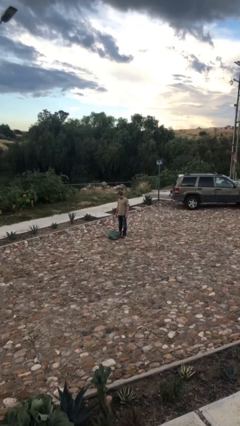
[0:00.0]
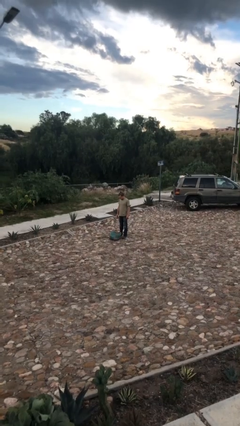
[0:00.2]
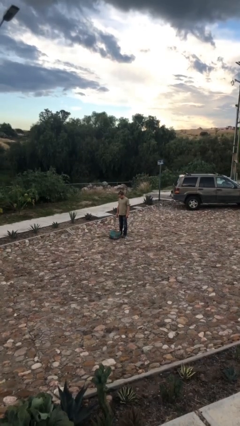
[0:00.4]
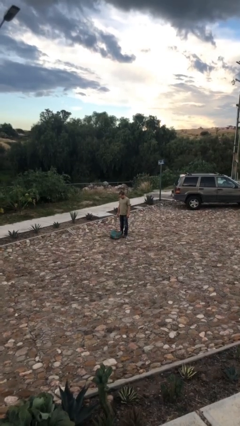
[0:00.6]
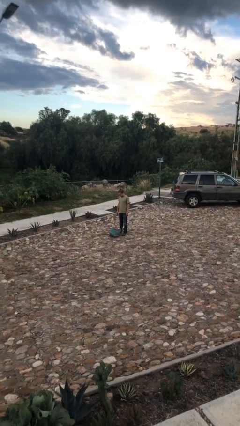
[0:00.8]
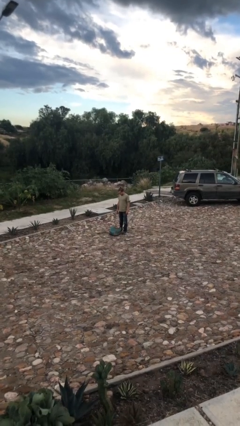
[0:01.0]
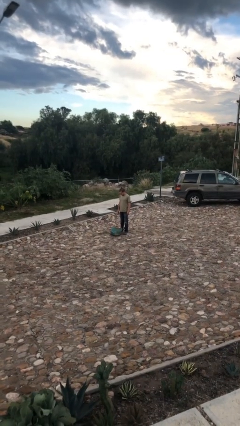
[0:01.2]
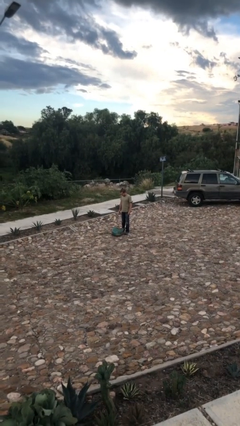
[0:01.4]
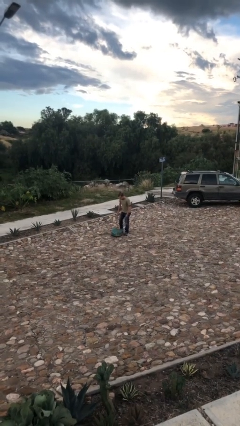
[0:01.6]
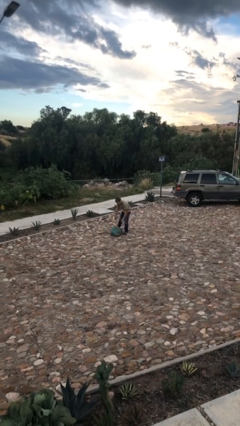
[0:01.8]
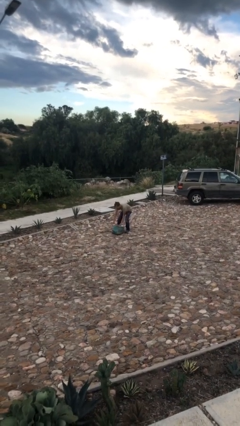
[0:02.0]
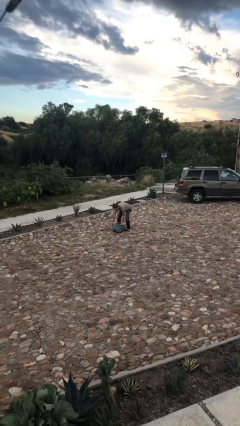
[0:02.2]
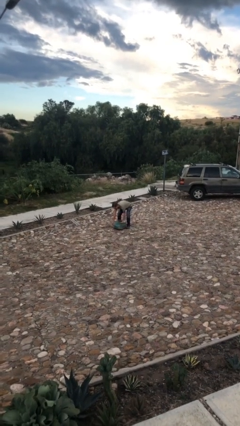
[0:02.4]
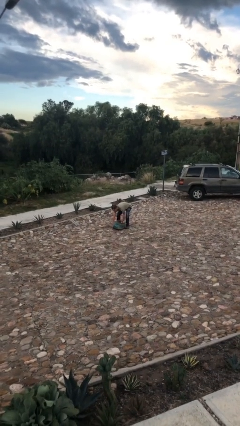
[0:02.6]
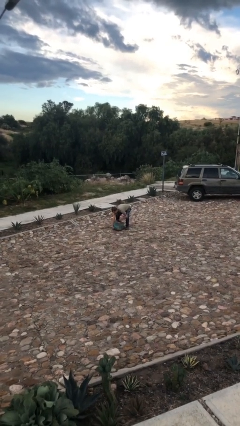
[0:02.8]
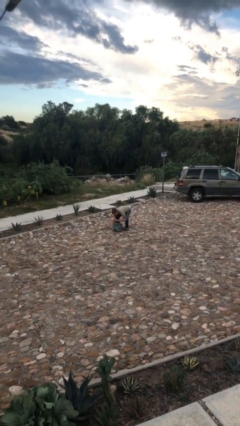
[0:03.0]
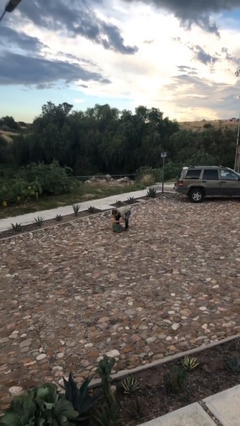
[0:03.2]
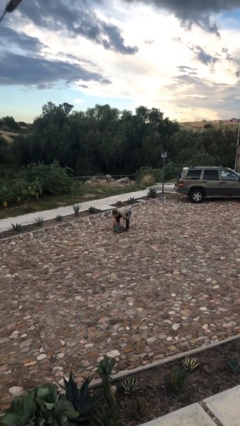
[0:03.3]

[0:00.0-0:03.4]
person picks up object from floor

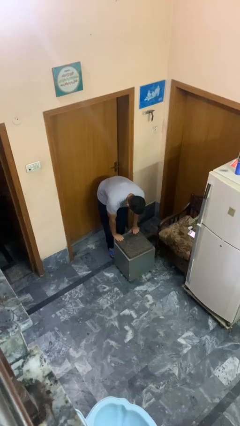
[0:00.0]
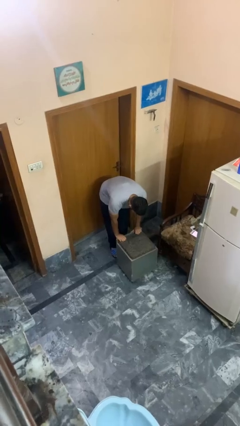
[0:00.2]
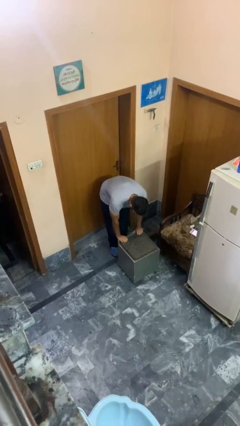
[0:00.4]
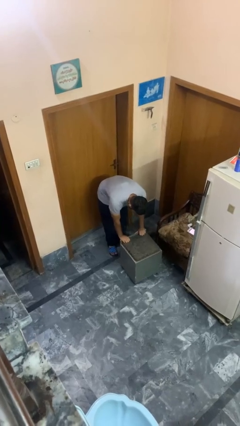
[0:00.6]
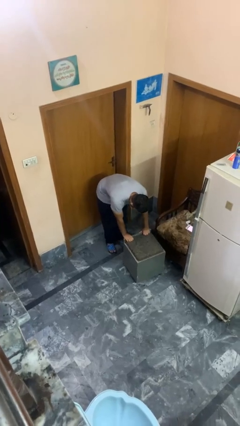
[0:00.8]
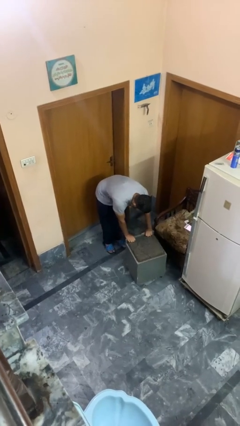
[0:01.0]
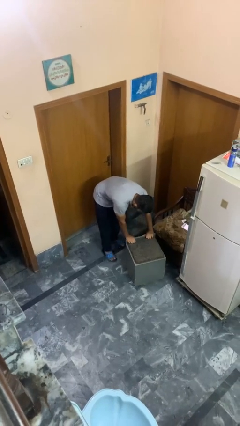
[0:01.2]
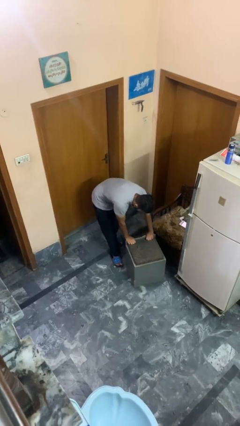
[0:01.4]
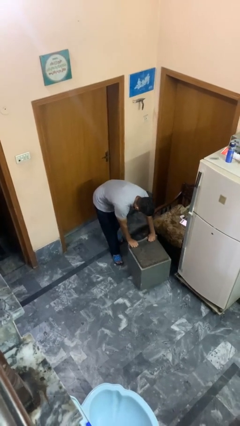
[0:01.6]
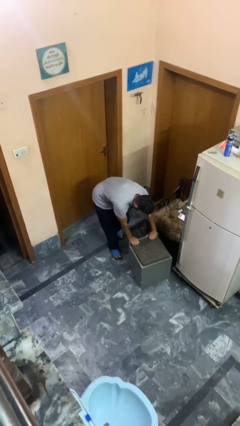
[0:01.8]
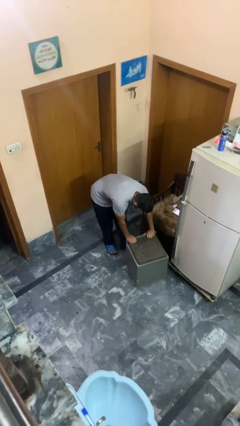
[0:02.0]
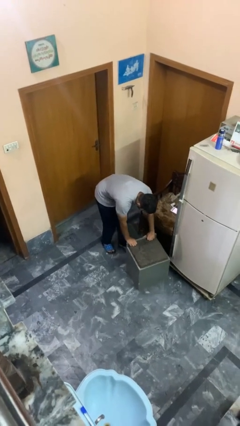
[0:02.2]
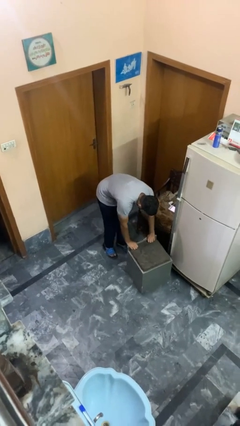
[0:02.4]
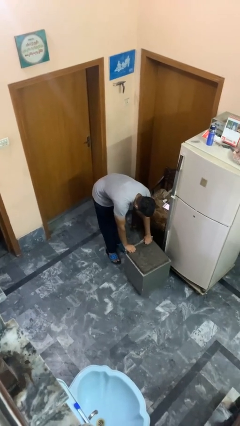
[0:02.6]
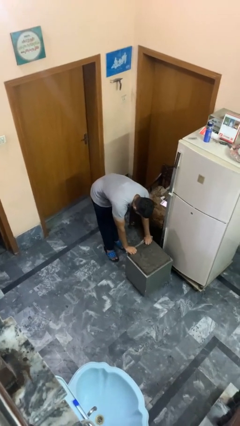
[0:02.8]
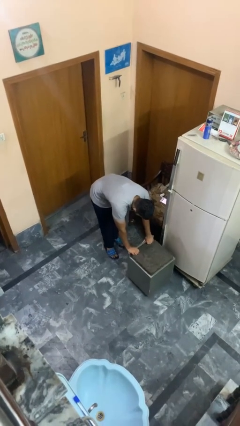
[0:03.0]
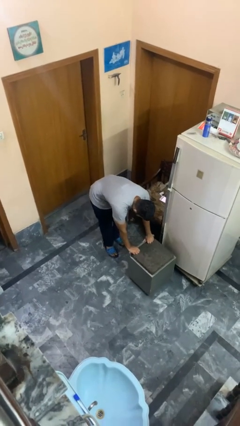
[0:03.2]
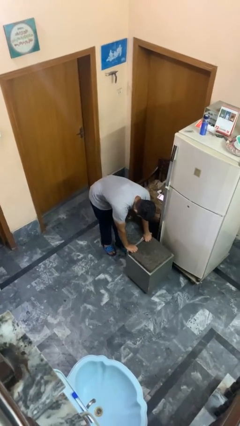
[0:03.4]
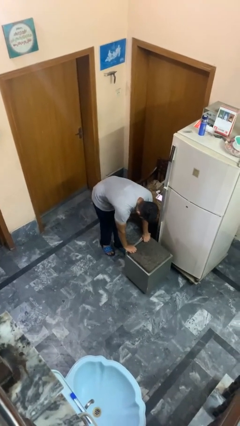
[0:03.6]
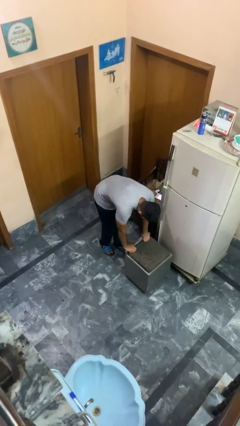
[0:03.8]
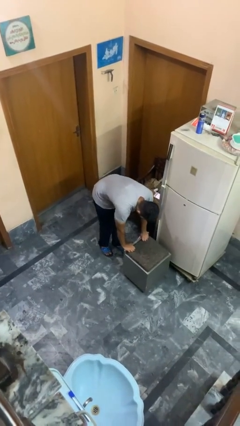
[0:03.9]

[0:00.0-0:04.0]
person pushes wheeled cart

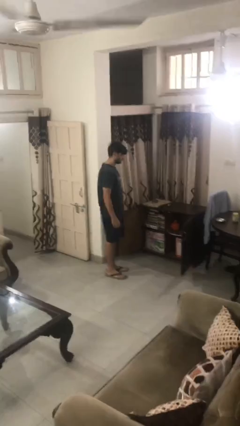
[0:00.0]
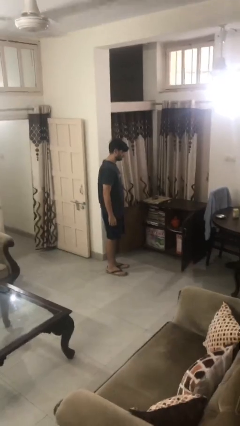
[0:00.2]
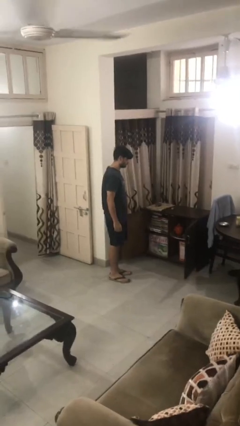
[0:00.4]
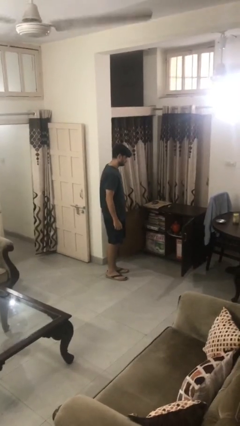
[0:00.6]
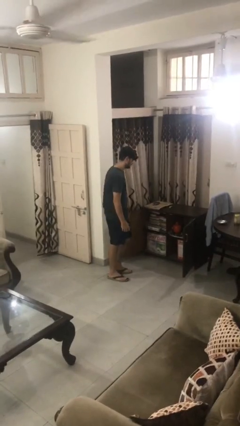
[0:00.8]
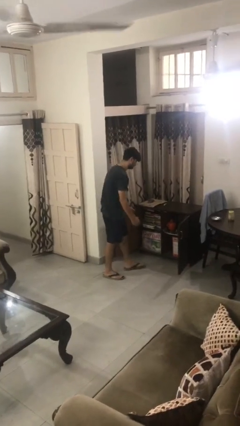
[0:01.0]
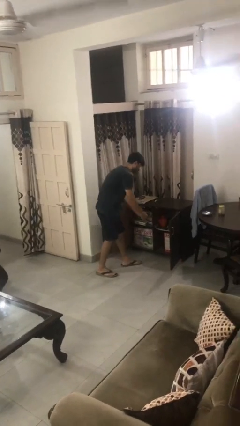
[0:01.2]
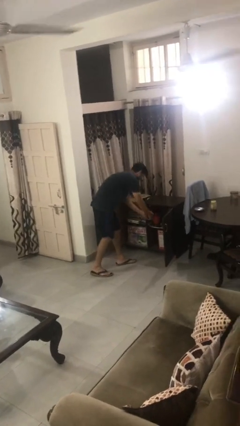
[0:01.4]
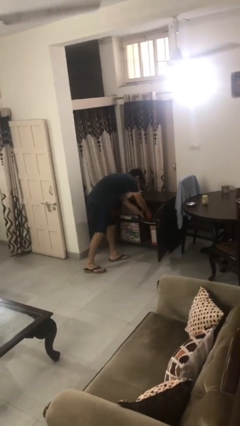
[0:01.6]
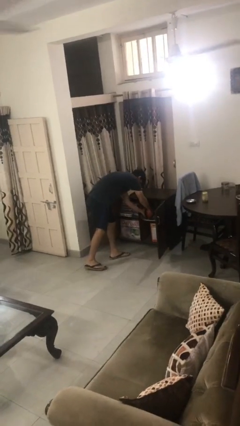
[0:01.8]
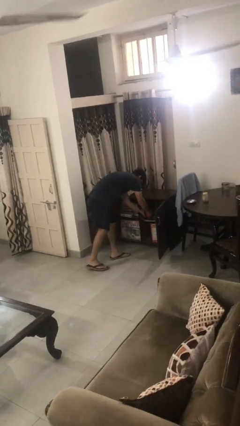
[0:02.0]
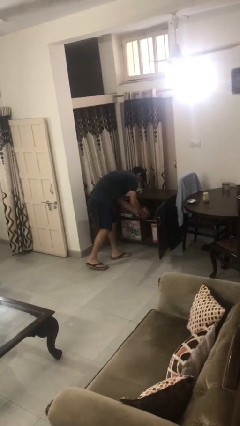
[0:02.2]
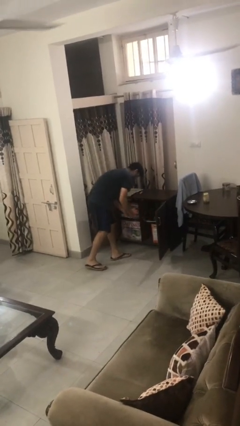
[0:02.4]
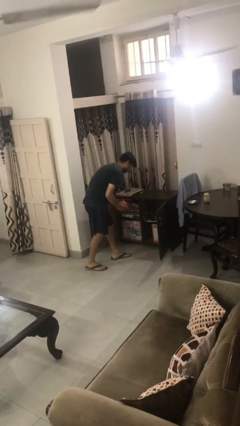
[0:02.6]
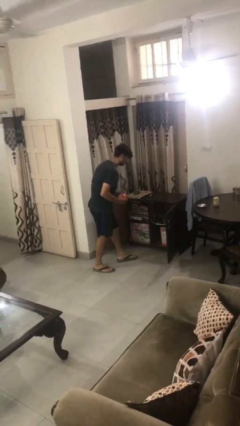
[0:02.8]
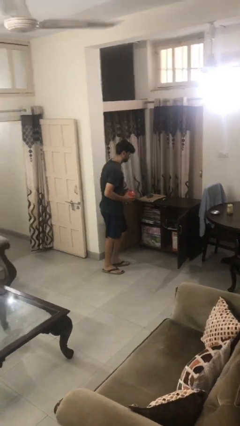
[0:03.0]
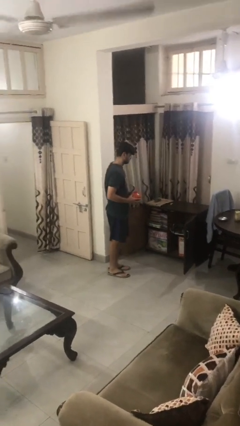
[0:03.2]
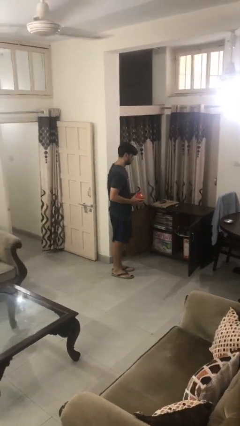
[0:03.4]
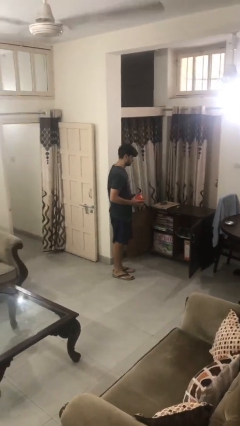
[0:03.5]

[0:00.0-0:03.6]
person picks up object from cabinet

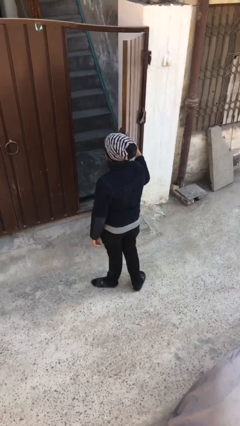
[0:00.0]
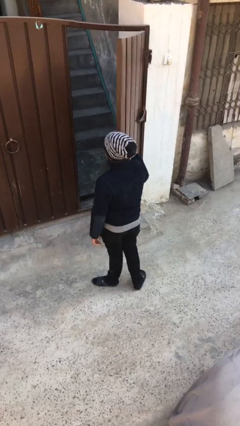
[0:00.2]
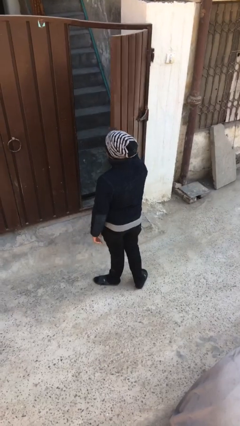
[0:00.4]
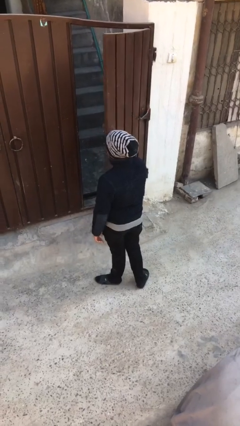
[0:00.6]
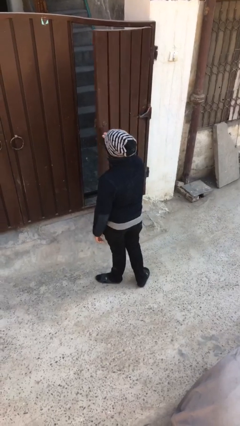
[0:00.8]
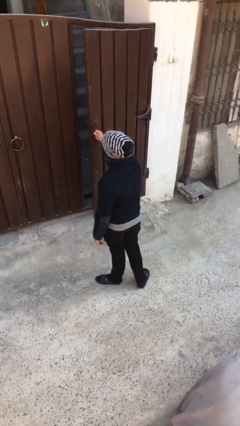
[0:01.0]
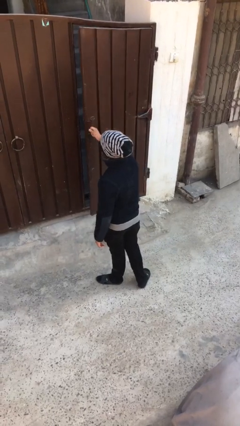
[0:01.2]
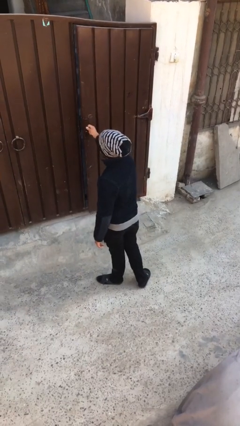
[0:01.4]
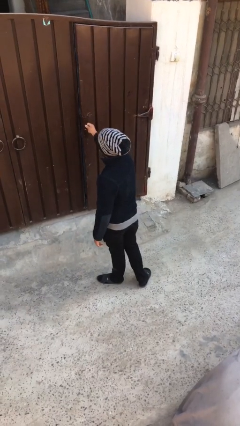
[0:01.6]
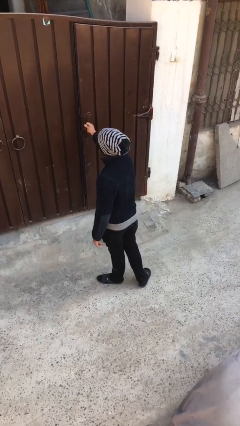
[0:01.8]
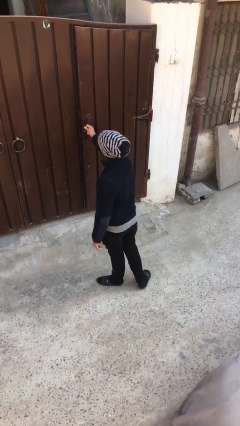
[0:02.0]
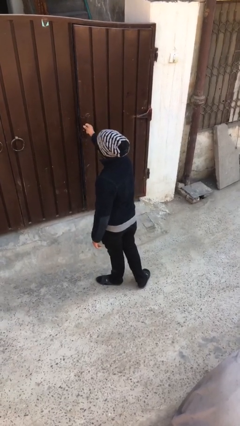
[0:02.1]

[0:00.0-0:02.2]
person closes facility door

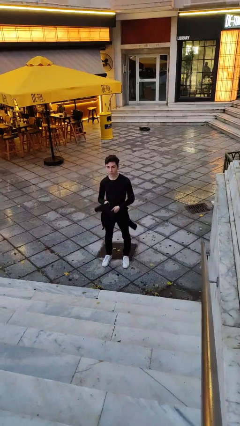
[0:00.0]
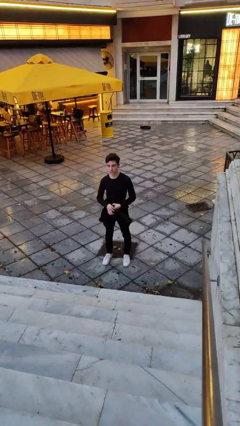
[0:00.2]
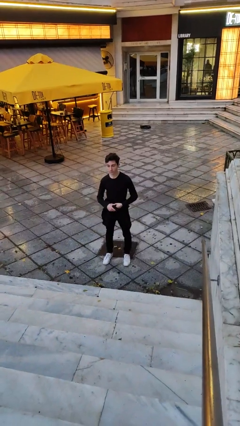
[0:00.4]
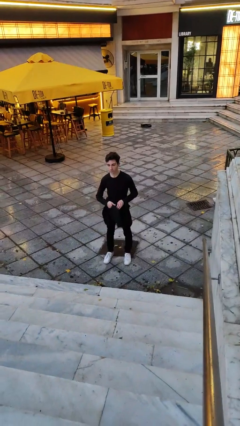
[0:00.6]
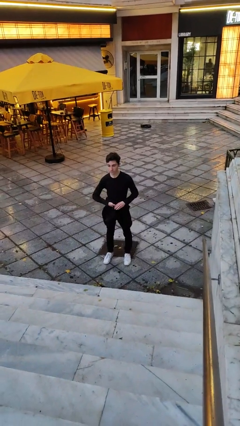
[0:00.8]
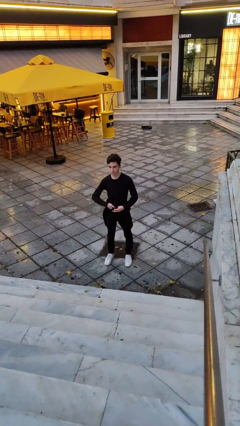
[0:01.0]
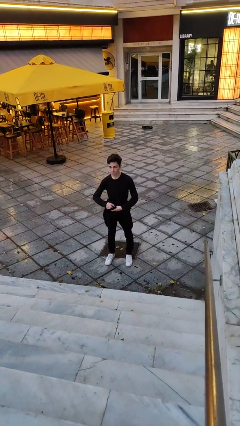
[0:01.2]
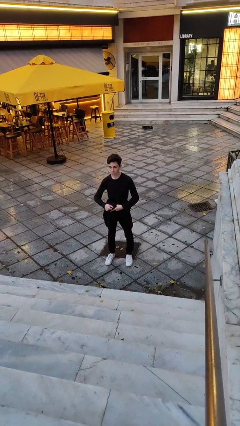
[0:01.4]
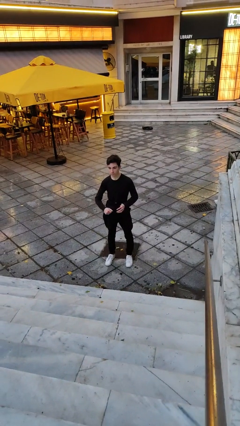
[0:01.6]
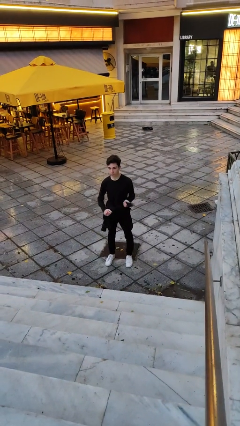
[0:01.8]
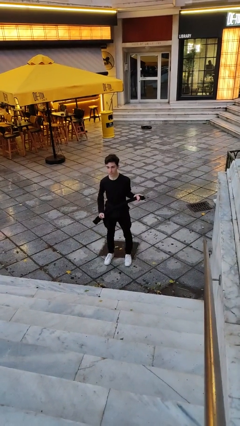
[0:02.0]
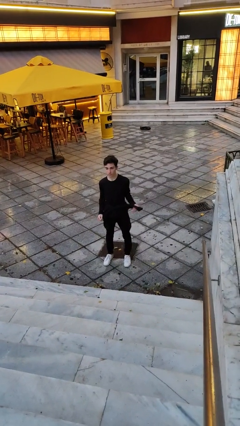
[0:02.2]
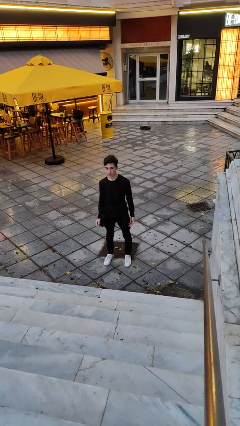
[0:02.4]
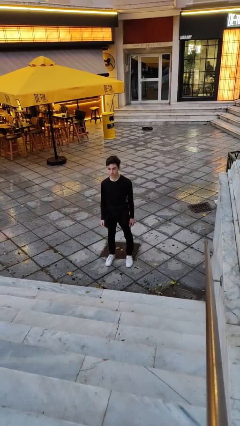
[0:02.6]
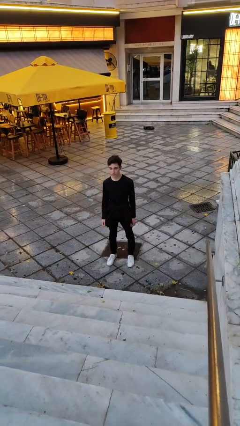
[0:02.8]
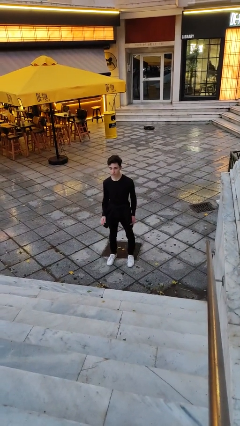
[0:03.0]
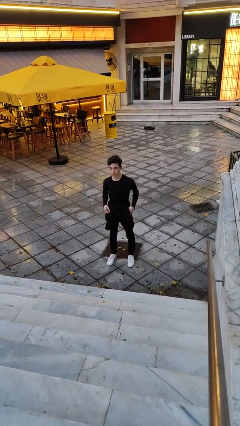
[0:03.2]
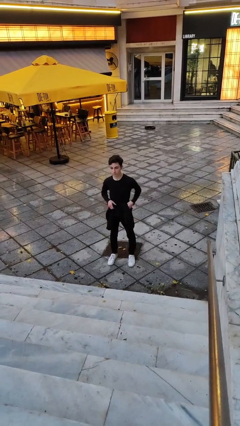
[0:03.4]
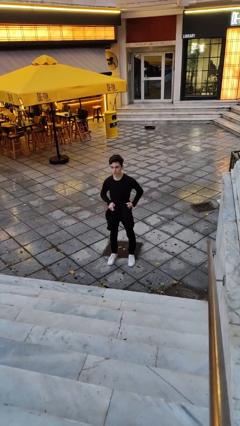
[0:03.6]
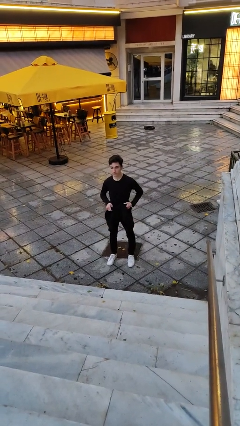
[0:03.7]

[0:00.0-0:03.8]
person ties jacket around waist

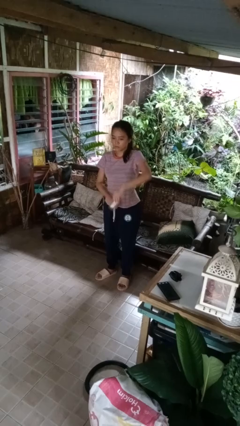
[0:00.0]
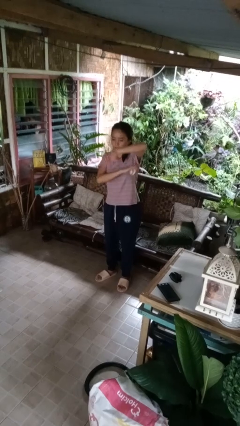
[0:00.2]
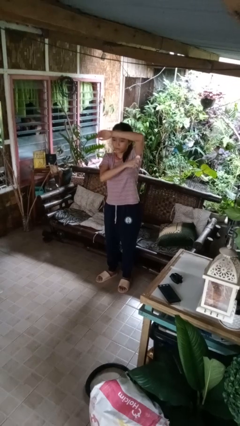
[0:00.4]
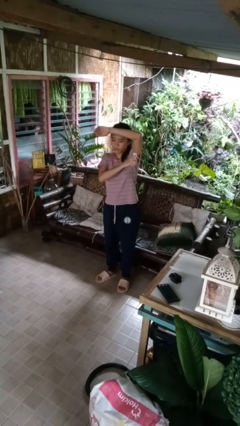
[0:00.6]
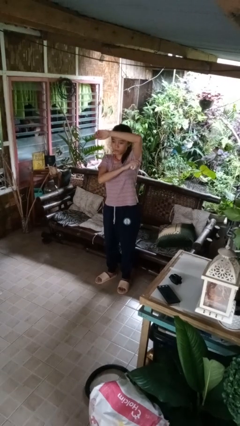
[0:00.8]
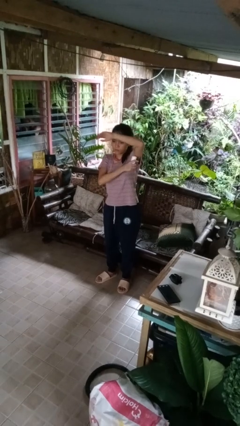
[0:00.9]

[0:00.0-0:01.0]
person applies deodorant
